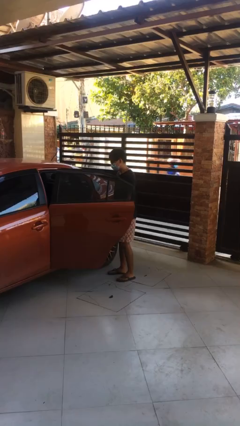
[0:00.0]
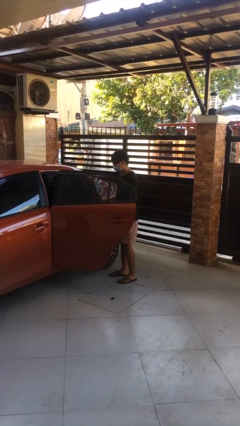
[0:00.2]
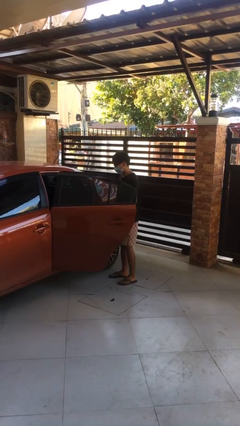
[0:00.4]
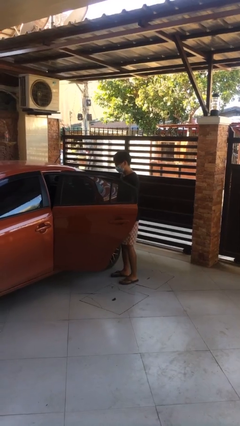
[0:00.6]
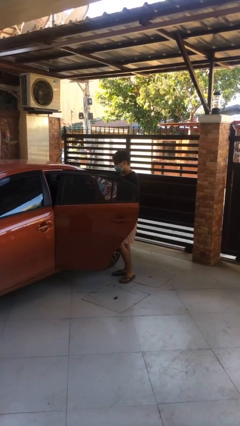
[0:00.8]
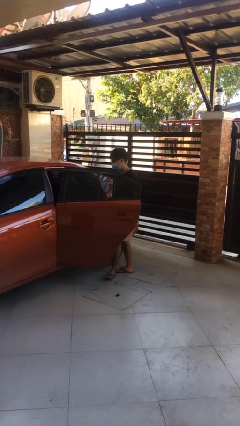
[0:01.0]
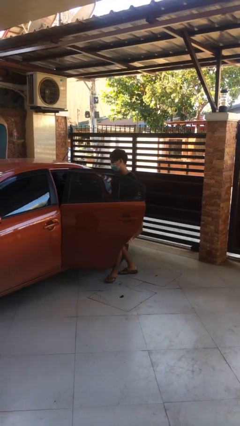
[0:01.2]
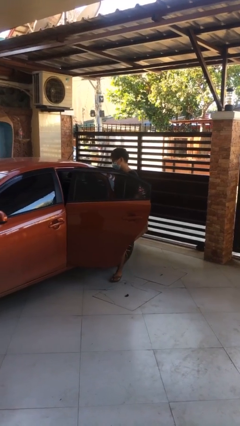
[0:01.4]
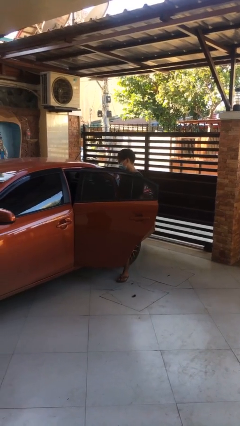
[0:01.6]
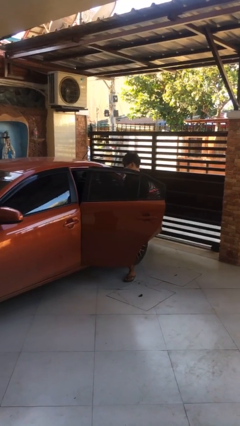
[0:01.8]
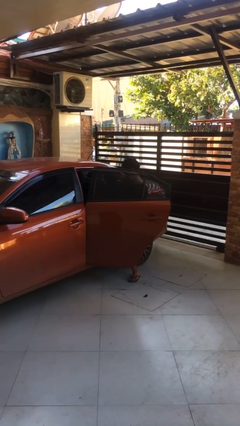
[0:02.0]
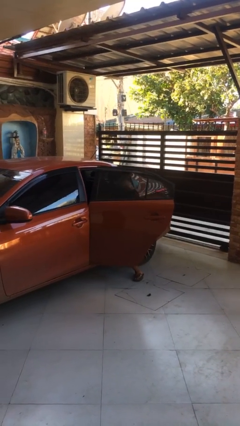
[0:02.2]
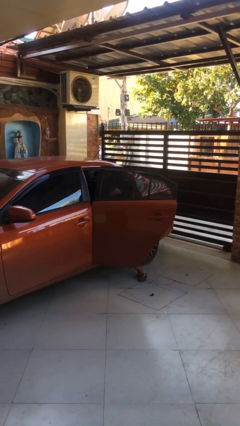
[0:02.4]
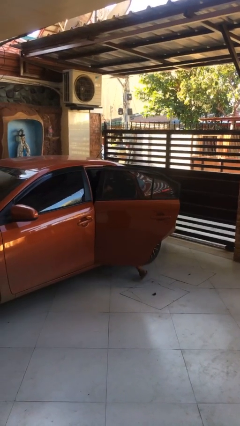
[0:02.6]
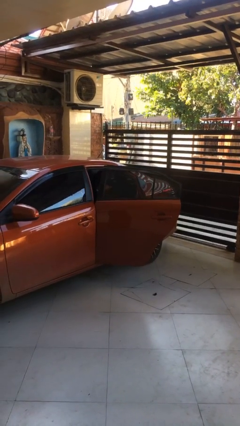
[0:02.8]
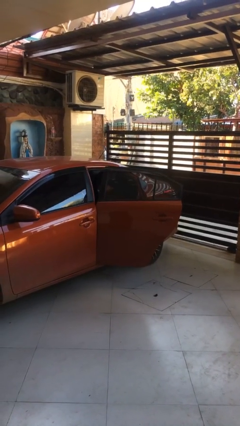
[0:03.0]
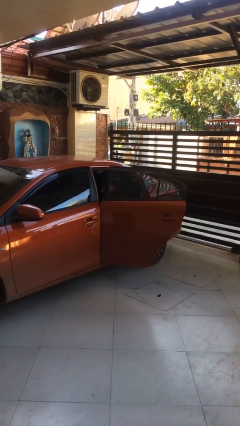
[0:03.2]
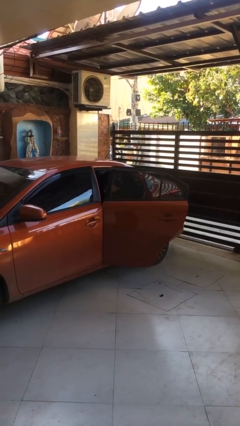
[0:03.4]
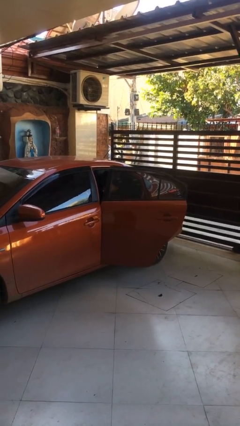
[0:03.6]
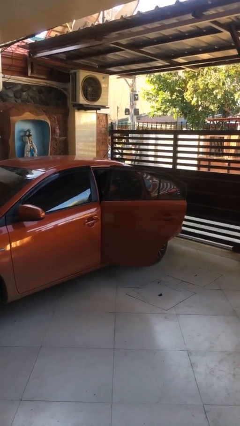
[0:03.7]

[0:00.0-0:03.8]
person enters car

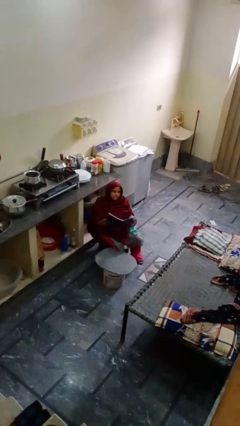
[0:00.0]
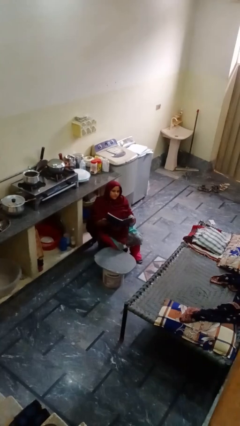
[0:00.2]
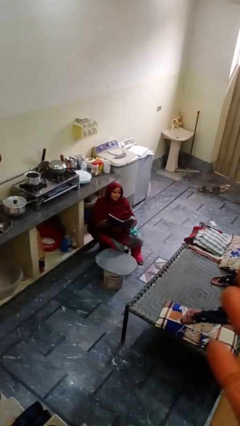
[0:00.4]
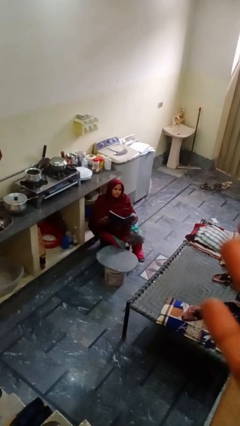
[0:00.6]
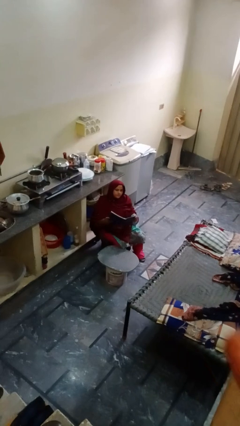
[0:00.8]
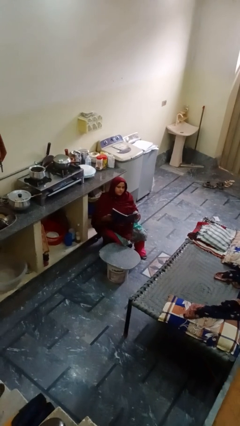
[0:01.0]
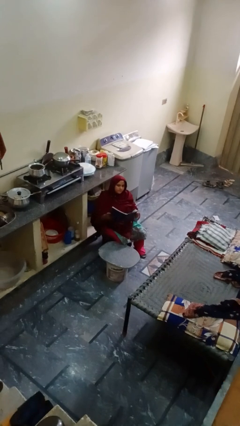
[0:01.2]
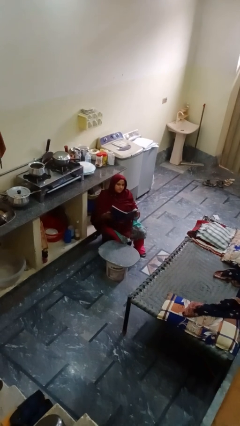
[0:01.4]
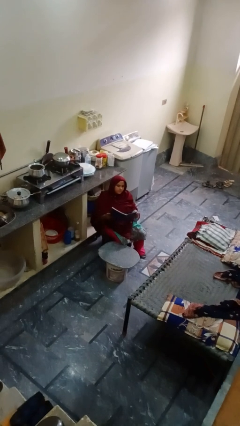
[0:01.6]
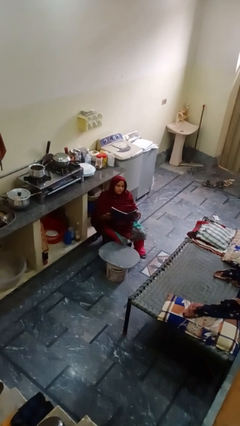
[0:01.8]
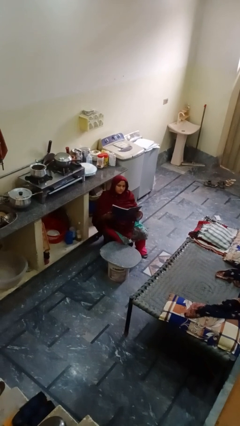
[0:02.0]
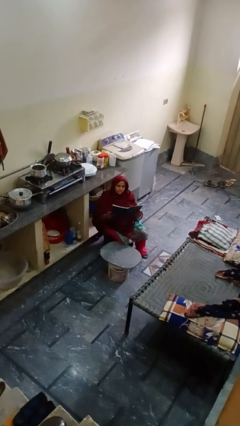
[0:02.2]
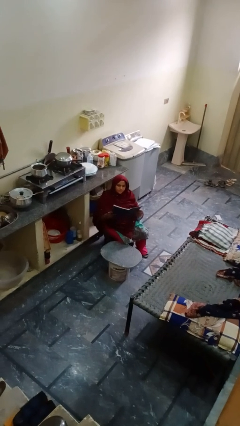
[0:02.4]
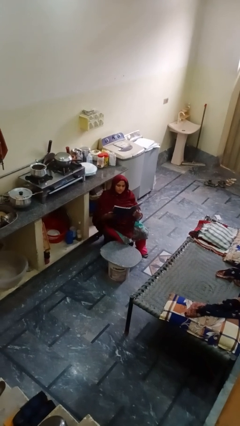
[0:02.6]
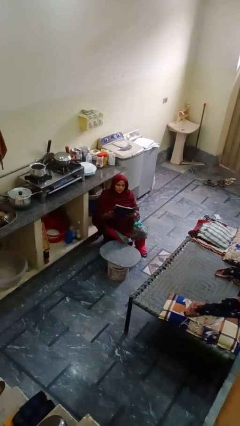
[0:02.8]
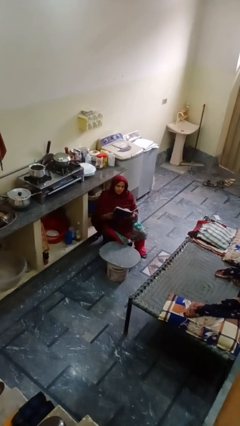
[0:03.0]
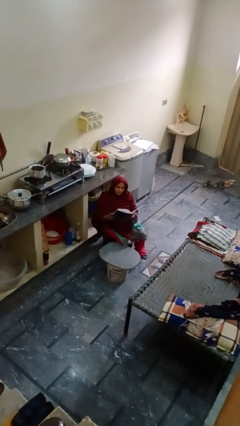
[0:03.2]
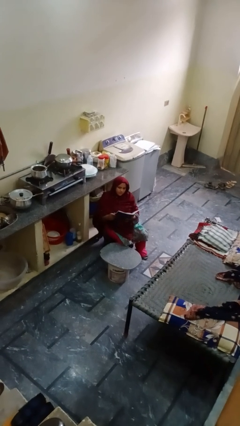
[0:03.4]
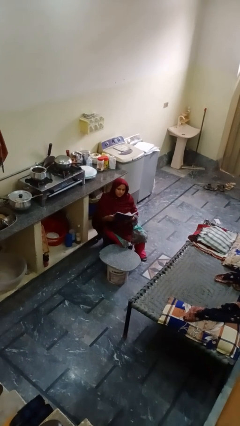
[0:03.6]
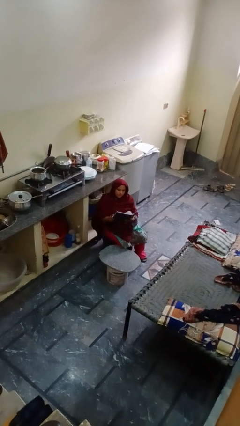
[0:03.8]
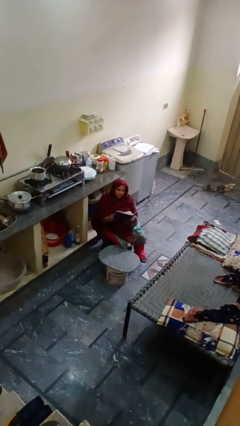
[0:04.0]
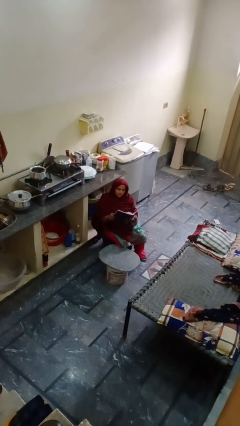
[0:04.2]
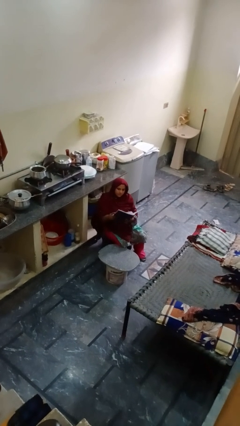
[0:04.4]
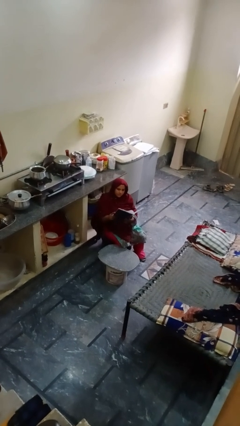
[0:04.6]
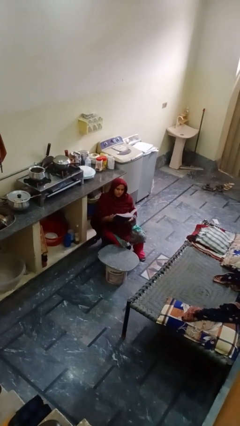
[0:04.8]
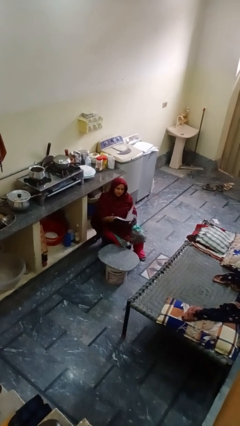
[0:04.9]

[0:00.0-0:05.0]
person reads magazine

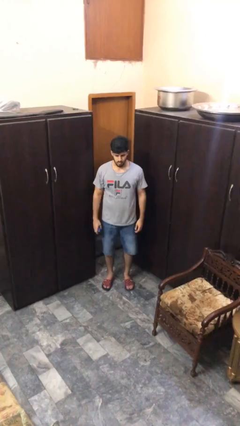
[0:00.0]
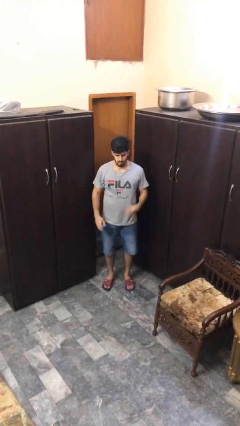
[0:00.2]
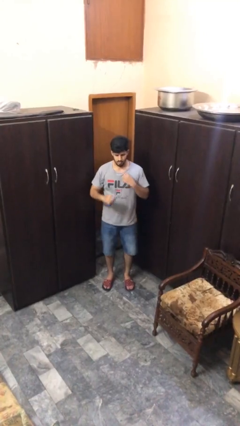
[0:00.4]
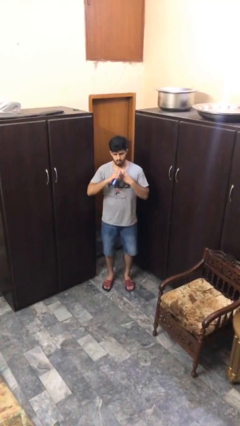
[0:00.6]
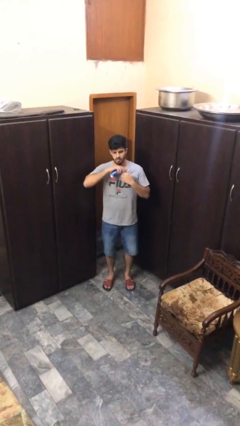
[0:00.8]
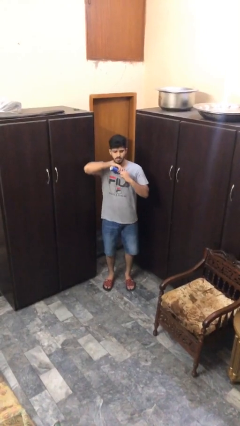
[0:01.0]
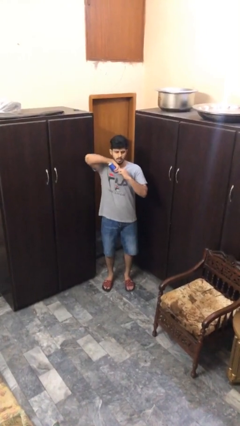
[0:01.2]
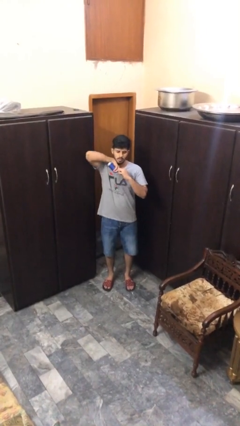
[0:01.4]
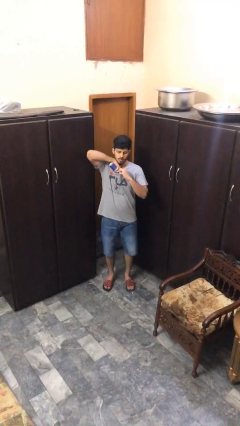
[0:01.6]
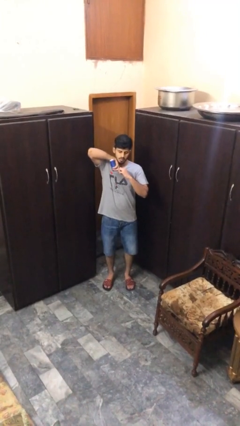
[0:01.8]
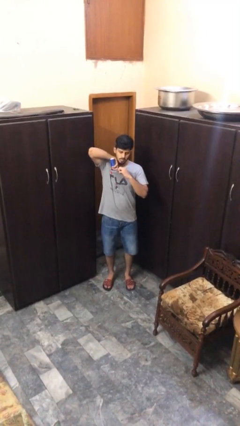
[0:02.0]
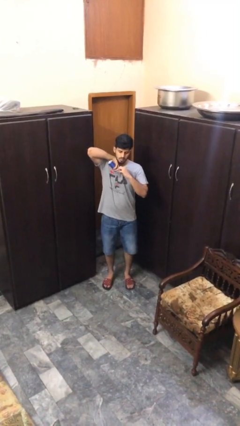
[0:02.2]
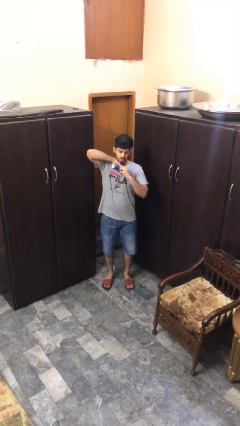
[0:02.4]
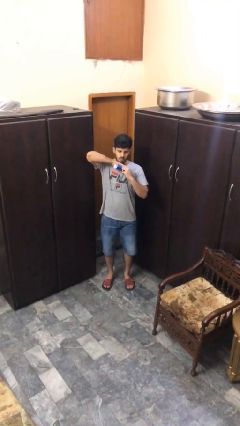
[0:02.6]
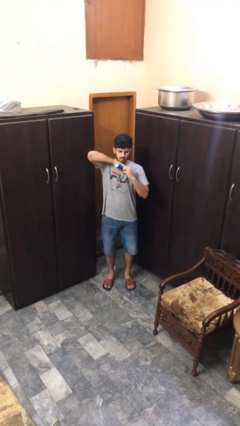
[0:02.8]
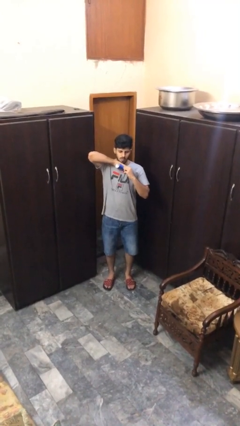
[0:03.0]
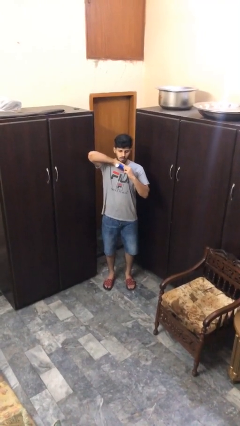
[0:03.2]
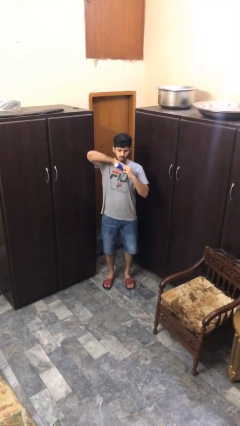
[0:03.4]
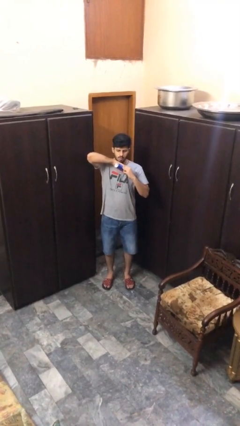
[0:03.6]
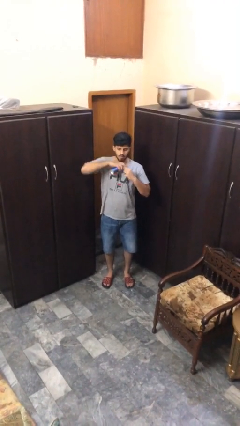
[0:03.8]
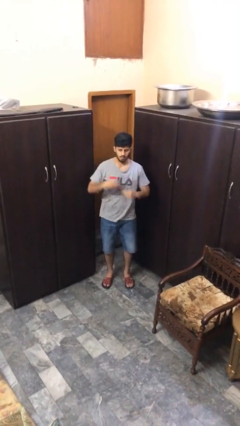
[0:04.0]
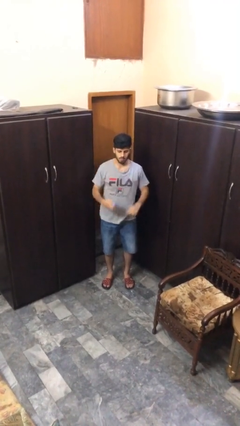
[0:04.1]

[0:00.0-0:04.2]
person applies deodorant

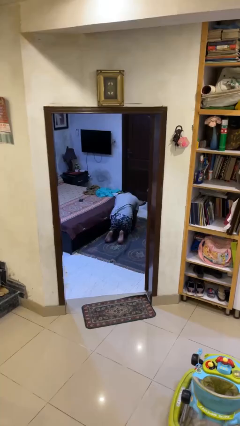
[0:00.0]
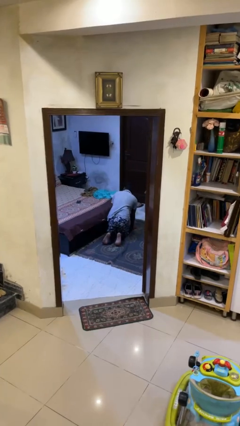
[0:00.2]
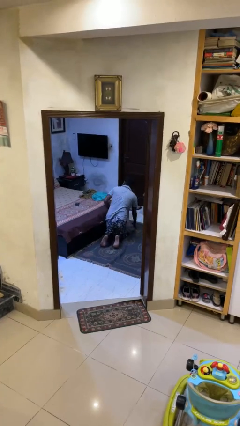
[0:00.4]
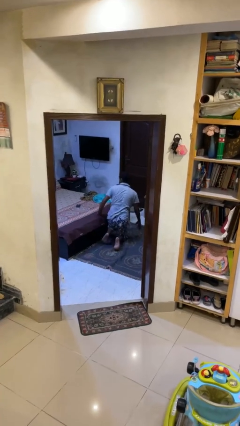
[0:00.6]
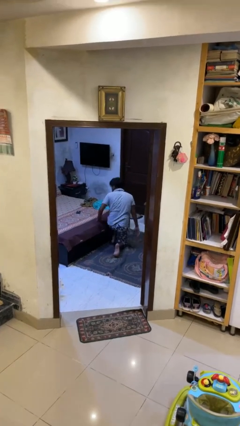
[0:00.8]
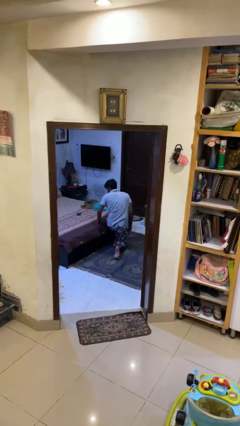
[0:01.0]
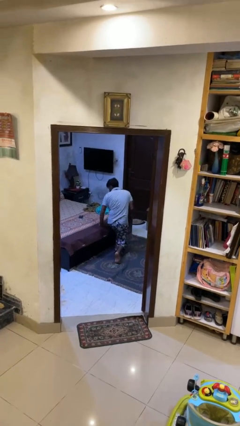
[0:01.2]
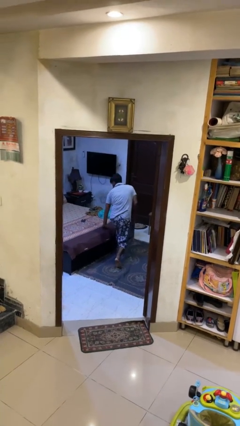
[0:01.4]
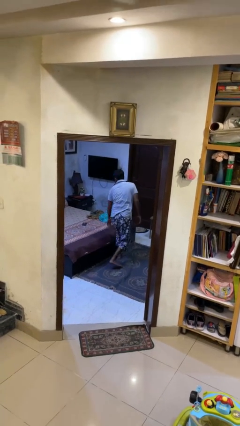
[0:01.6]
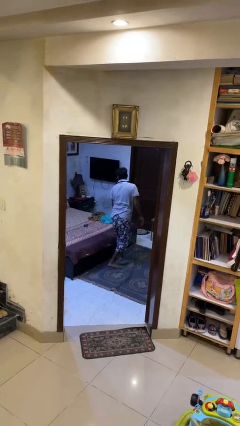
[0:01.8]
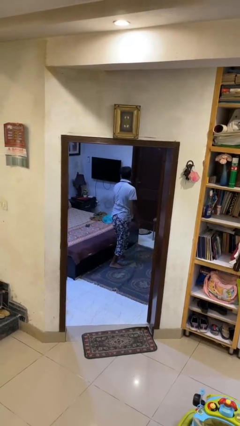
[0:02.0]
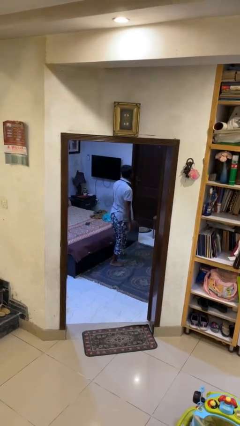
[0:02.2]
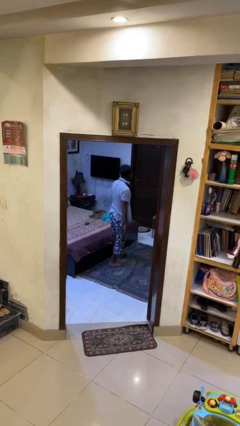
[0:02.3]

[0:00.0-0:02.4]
person stands up from floor

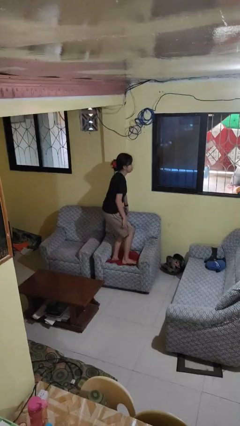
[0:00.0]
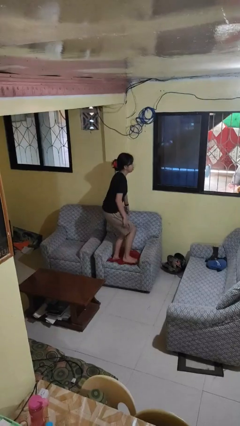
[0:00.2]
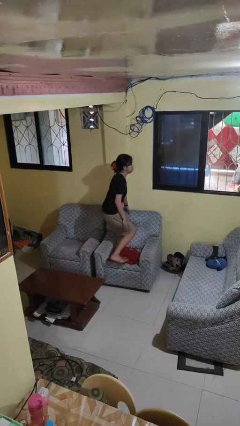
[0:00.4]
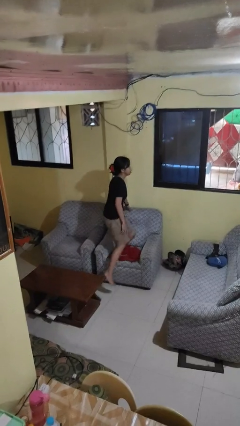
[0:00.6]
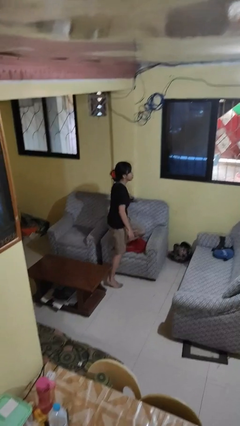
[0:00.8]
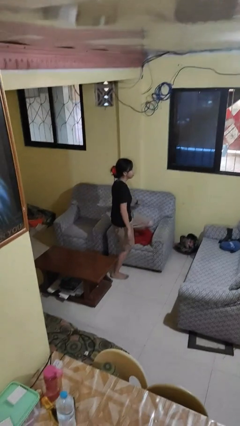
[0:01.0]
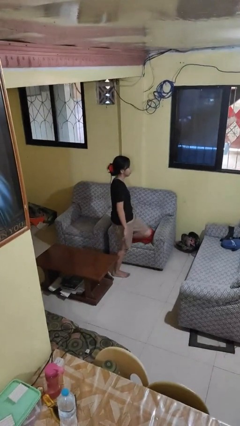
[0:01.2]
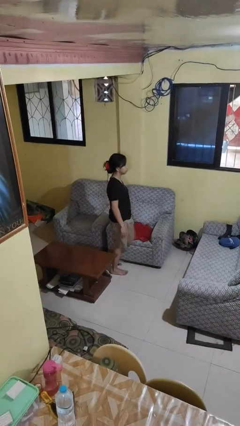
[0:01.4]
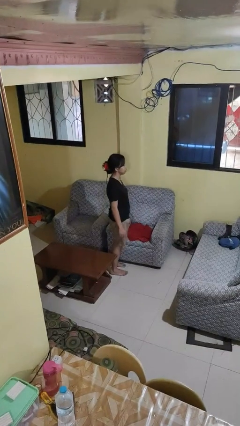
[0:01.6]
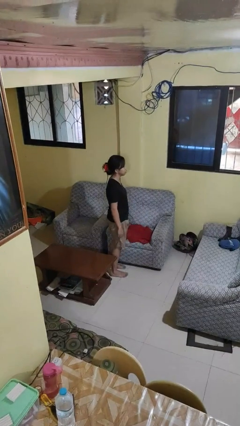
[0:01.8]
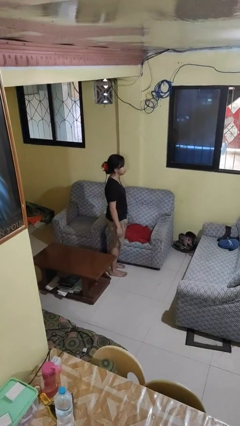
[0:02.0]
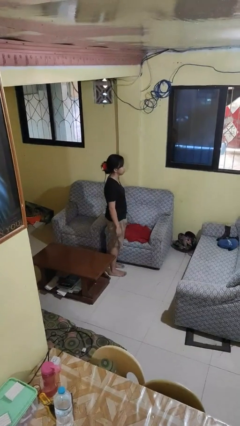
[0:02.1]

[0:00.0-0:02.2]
person climbs off couch

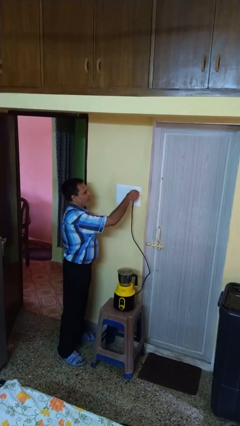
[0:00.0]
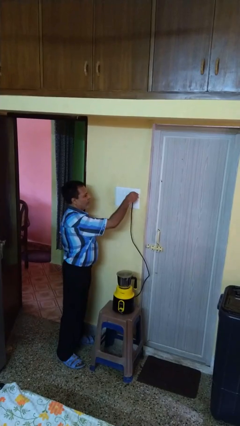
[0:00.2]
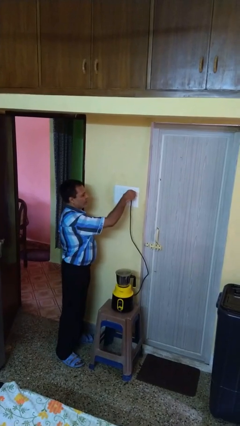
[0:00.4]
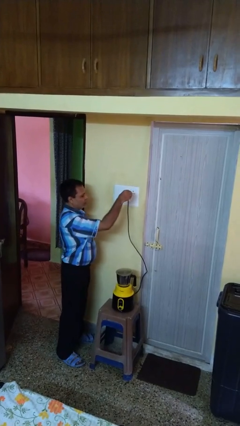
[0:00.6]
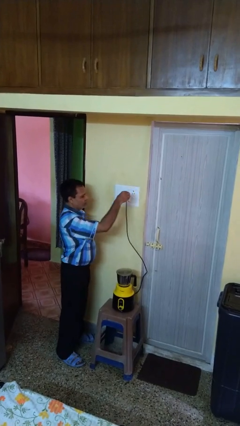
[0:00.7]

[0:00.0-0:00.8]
person unplugs from electrical socket
